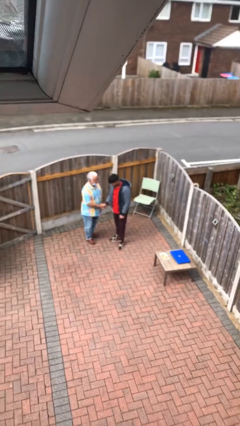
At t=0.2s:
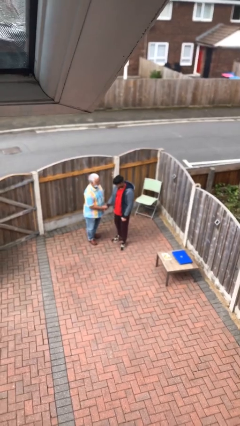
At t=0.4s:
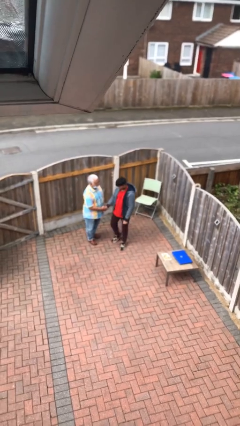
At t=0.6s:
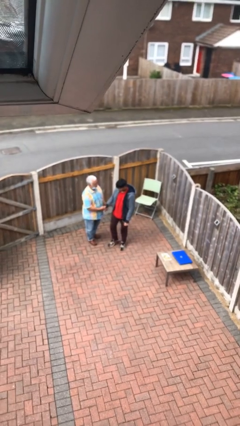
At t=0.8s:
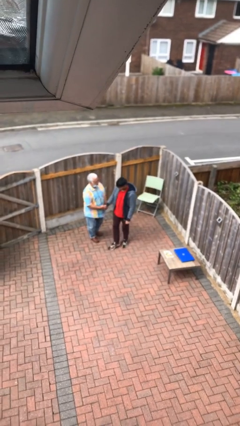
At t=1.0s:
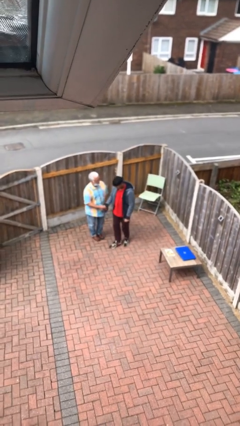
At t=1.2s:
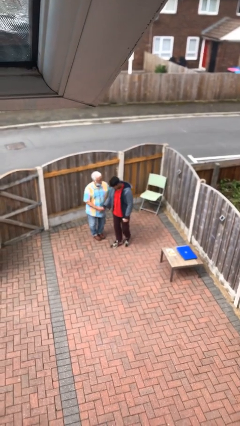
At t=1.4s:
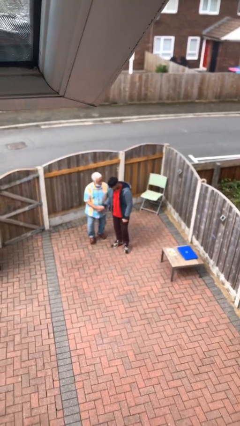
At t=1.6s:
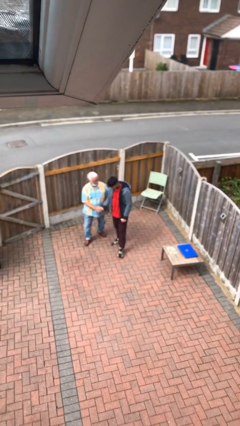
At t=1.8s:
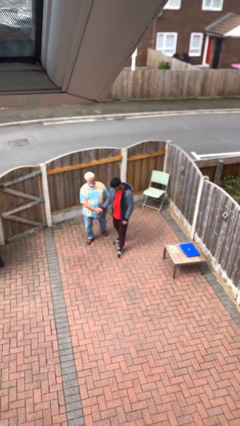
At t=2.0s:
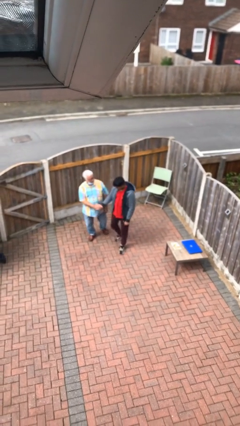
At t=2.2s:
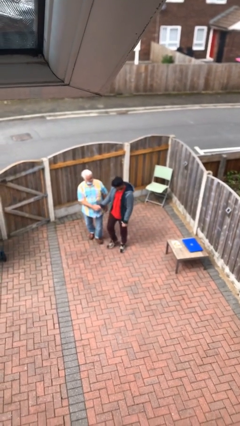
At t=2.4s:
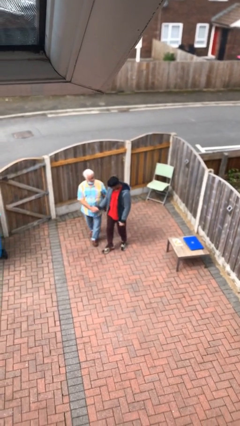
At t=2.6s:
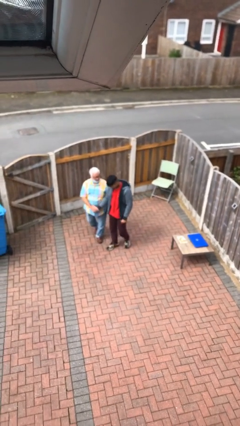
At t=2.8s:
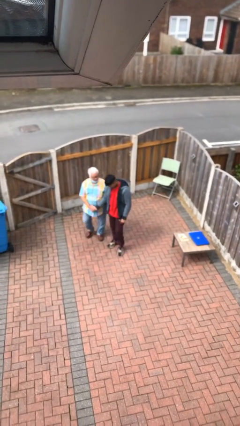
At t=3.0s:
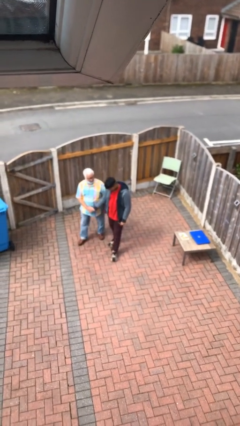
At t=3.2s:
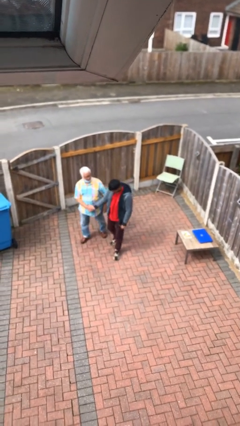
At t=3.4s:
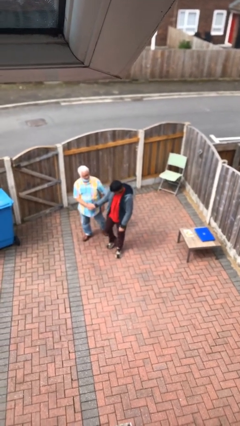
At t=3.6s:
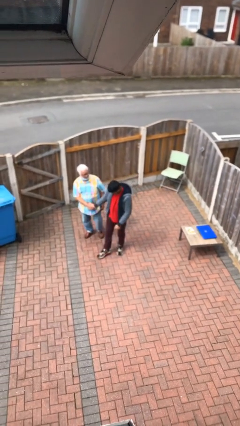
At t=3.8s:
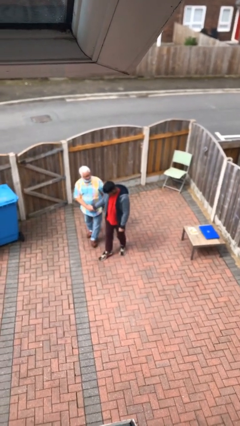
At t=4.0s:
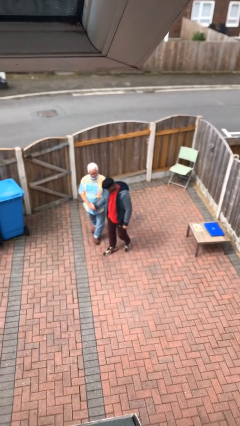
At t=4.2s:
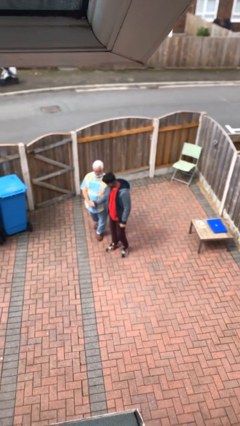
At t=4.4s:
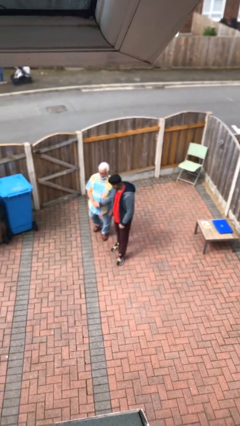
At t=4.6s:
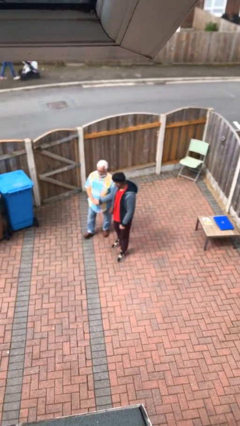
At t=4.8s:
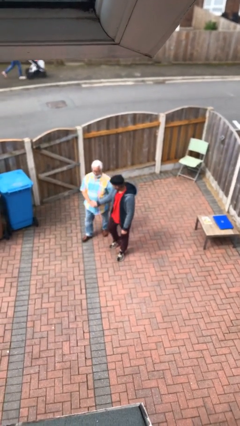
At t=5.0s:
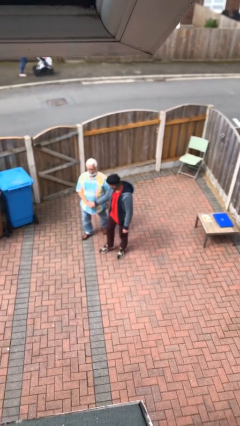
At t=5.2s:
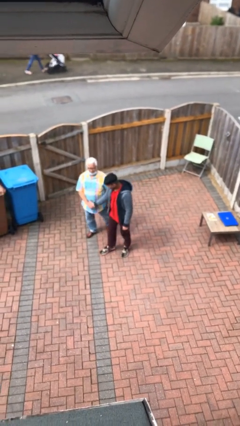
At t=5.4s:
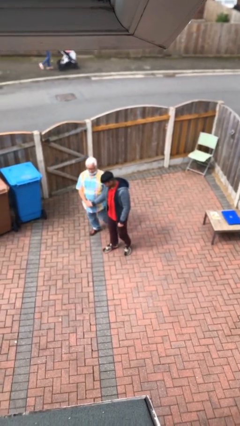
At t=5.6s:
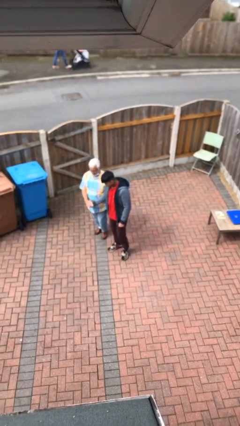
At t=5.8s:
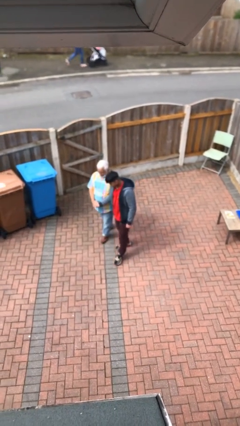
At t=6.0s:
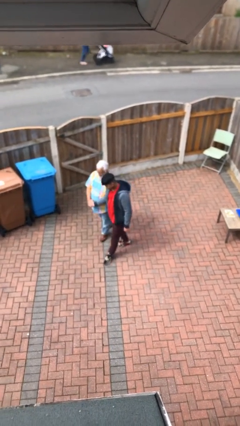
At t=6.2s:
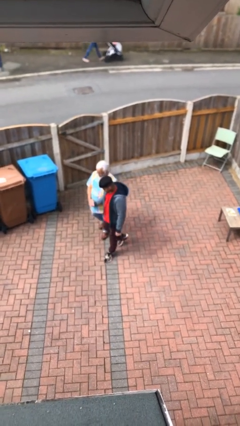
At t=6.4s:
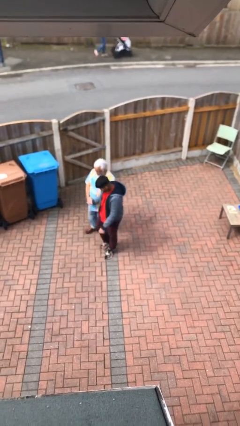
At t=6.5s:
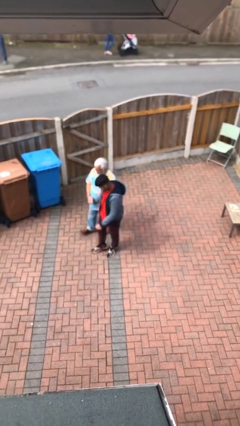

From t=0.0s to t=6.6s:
person holds hand

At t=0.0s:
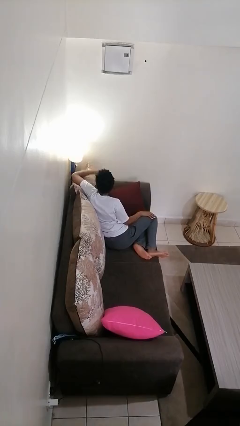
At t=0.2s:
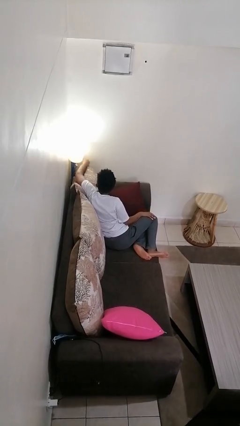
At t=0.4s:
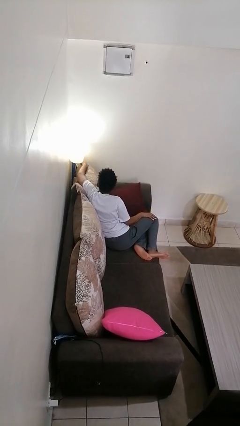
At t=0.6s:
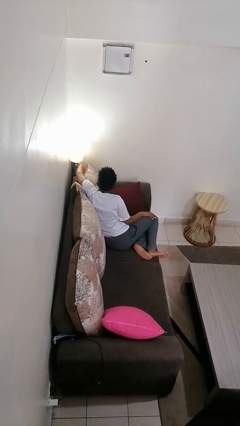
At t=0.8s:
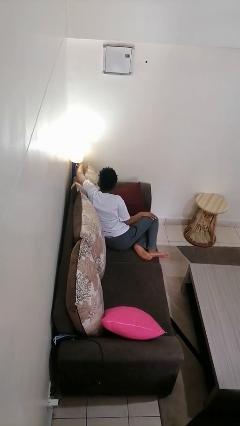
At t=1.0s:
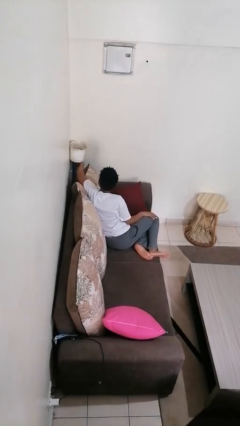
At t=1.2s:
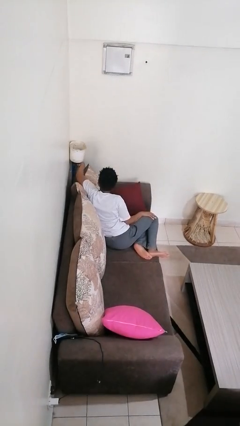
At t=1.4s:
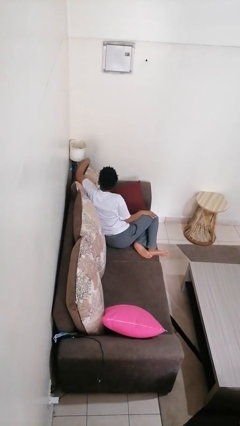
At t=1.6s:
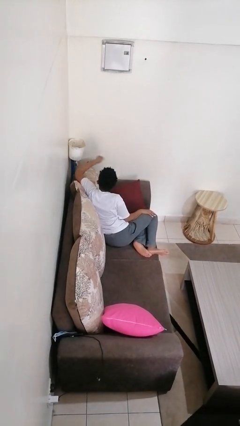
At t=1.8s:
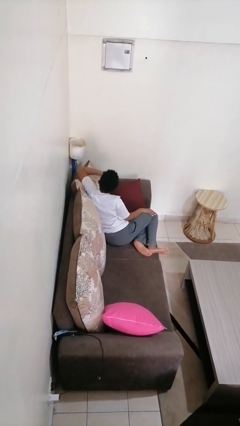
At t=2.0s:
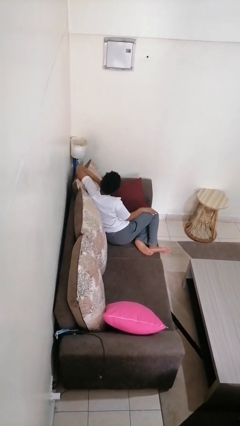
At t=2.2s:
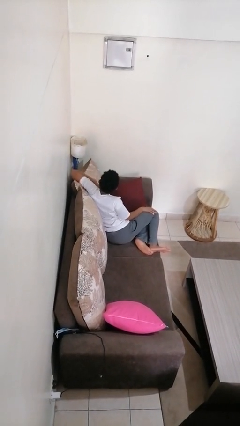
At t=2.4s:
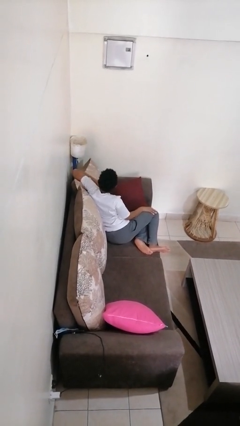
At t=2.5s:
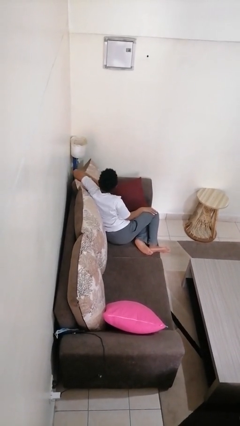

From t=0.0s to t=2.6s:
person turns off lamp

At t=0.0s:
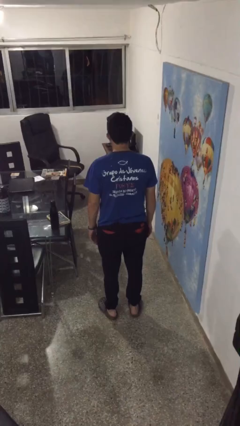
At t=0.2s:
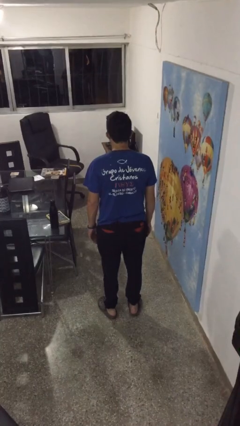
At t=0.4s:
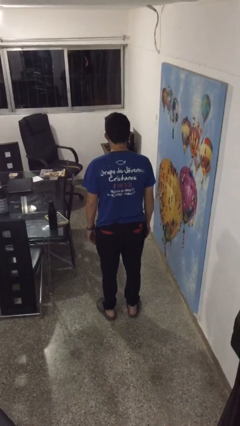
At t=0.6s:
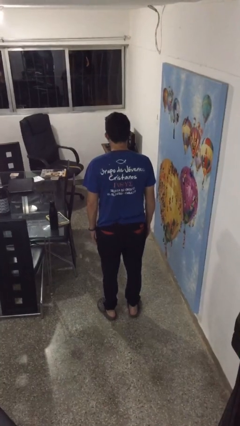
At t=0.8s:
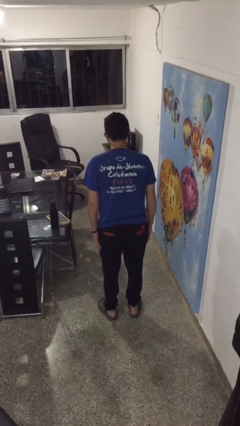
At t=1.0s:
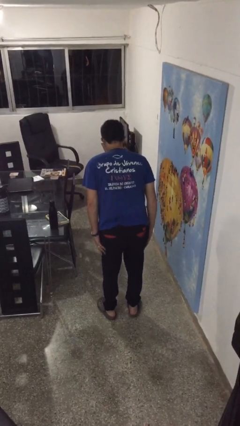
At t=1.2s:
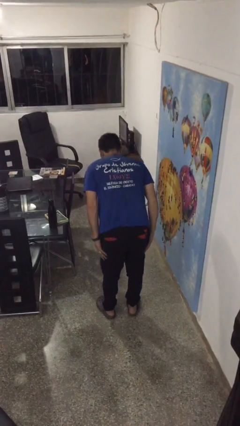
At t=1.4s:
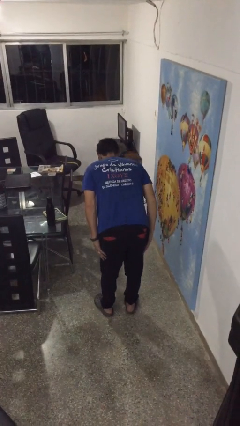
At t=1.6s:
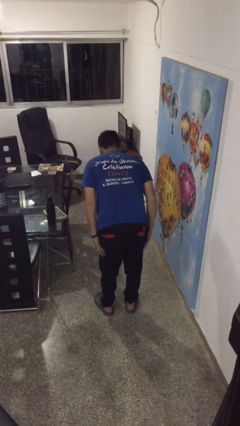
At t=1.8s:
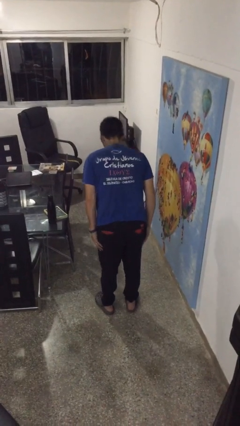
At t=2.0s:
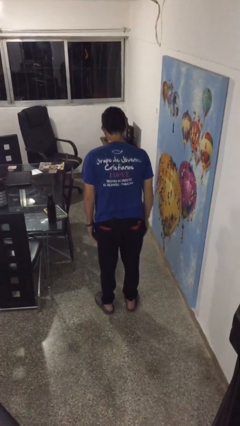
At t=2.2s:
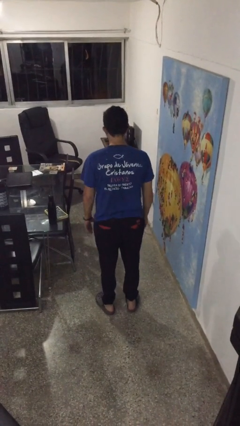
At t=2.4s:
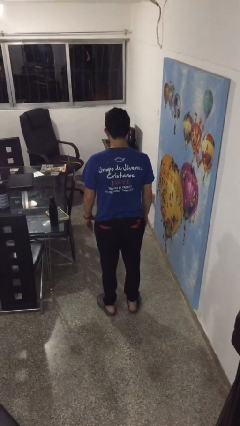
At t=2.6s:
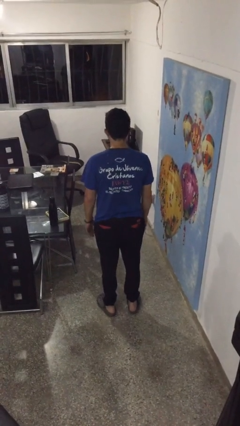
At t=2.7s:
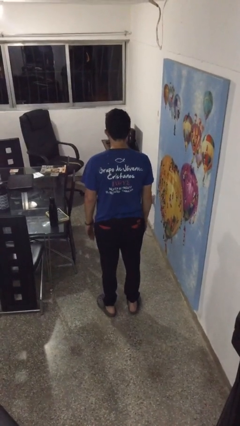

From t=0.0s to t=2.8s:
person bows

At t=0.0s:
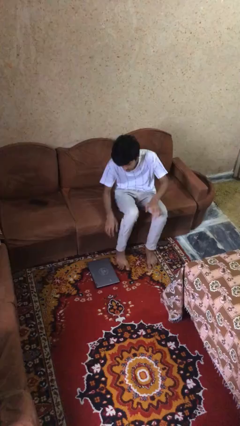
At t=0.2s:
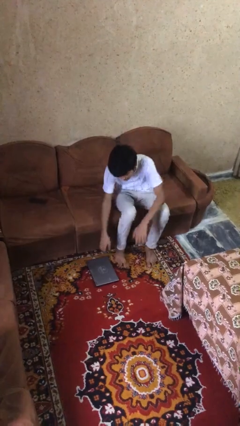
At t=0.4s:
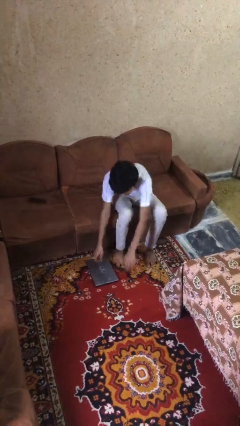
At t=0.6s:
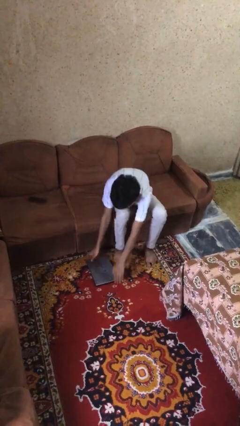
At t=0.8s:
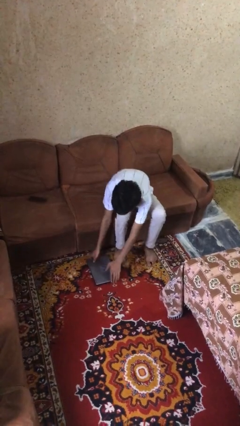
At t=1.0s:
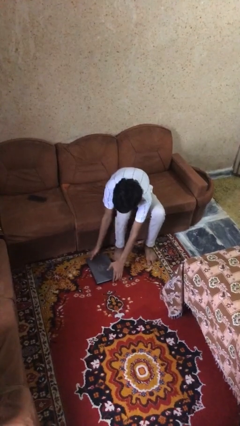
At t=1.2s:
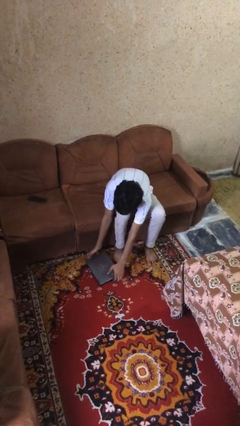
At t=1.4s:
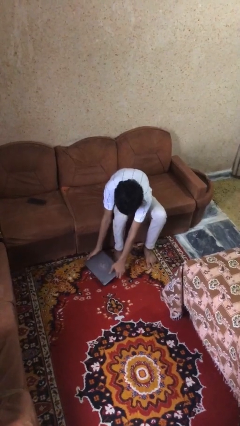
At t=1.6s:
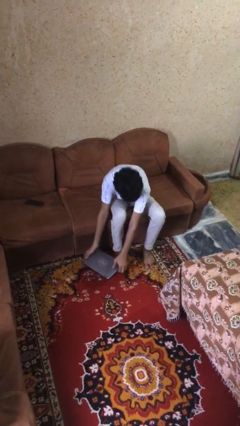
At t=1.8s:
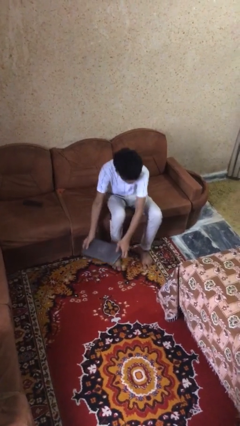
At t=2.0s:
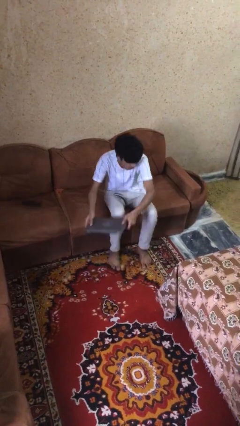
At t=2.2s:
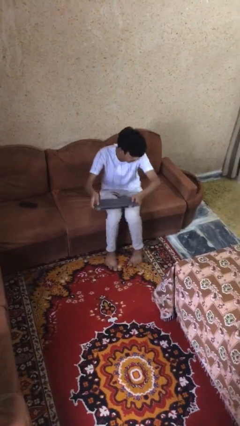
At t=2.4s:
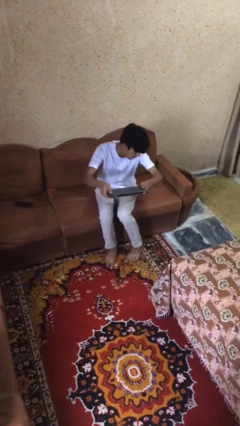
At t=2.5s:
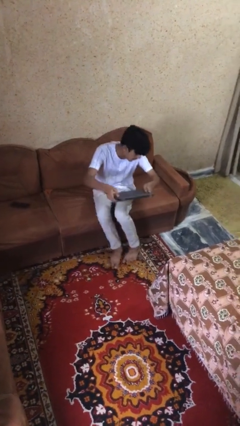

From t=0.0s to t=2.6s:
person picks up object from floor

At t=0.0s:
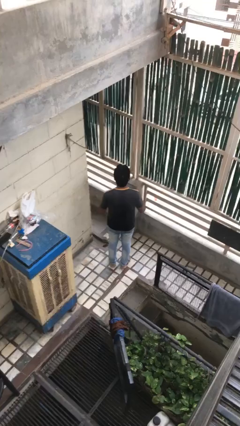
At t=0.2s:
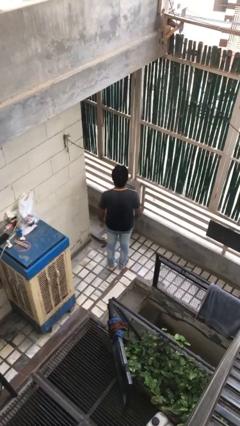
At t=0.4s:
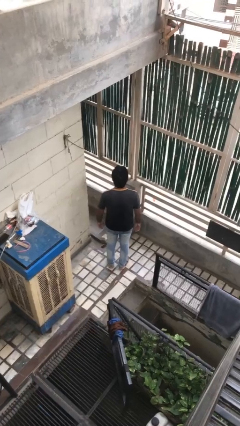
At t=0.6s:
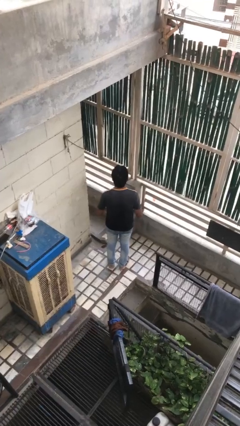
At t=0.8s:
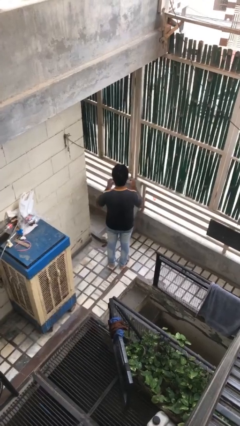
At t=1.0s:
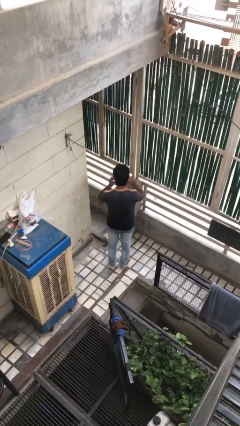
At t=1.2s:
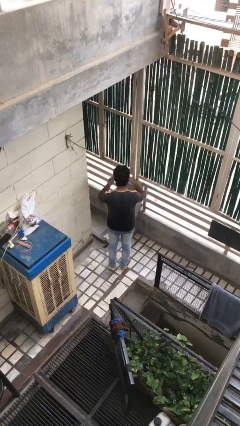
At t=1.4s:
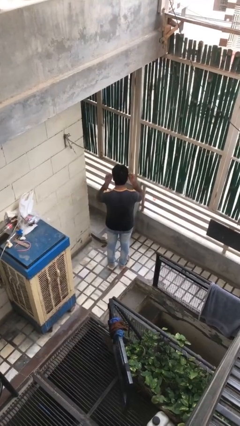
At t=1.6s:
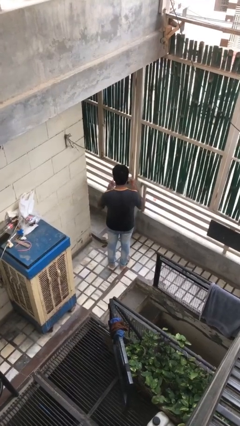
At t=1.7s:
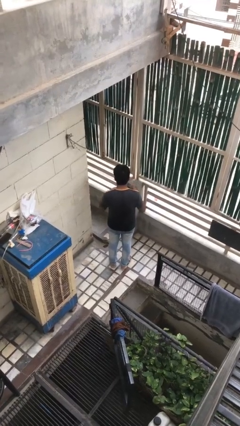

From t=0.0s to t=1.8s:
person takes off facemask
